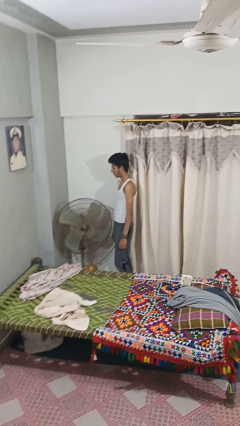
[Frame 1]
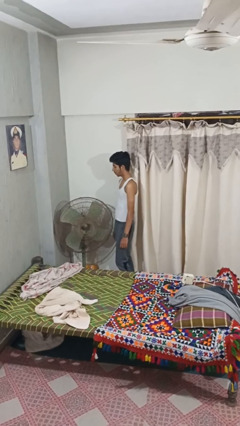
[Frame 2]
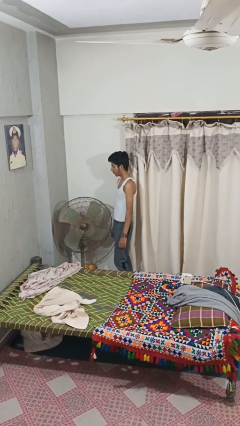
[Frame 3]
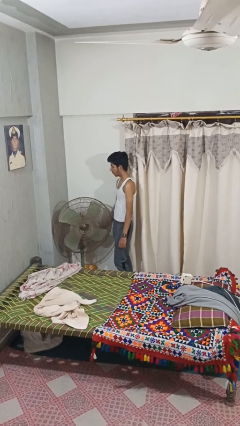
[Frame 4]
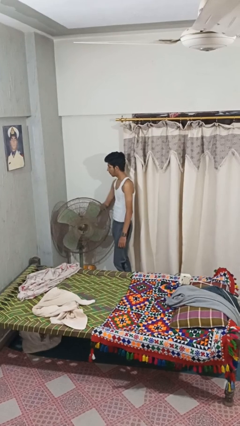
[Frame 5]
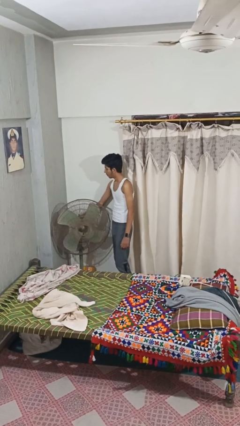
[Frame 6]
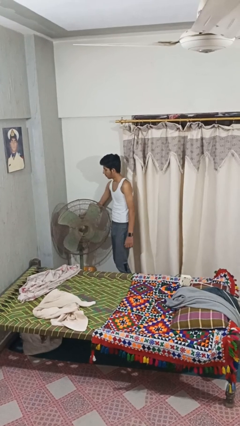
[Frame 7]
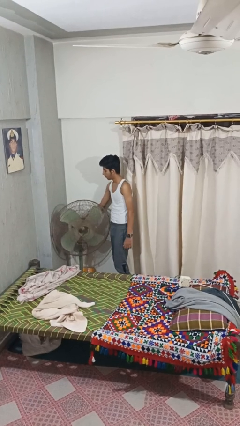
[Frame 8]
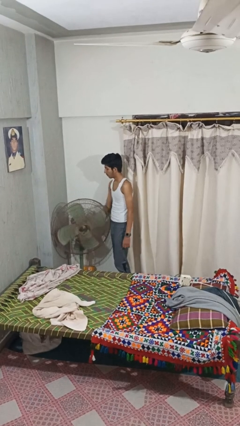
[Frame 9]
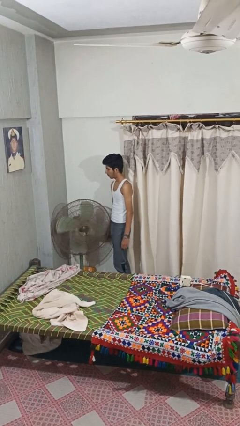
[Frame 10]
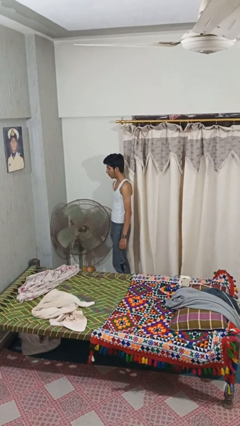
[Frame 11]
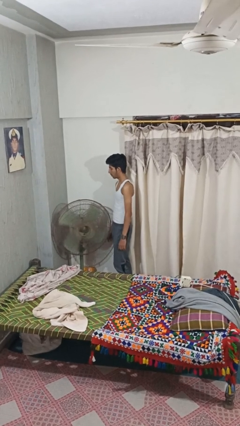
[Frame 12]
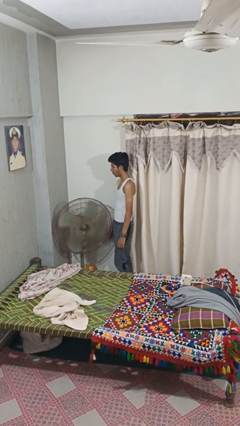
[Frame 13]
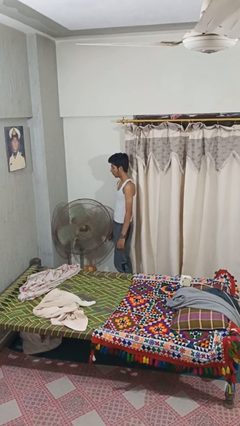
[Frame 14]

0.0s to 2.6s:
person turns on fan

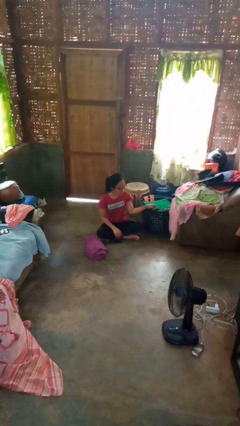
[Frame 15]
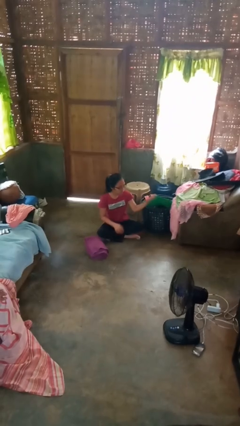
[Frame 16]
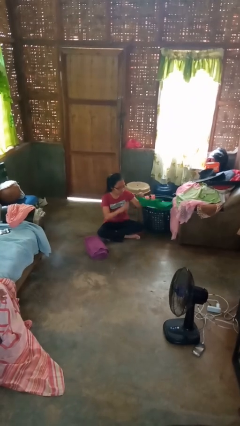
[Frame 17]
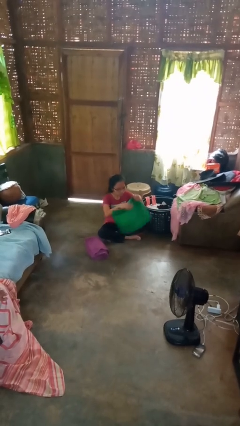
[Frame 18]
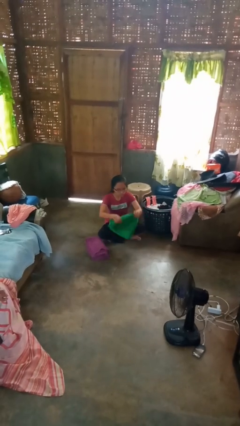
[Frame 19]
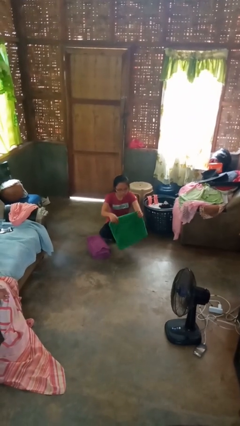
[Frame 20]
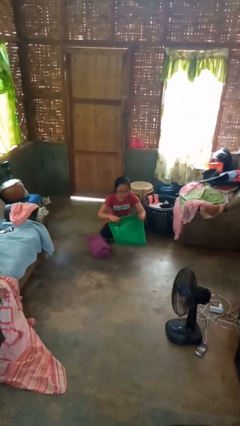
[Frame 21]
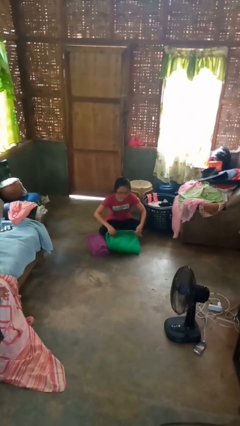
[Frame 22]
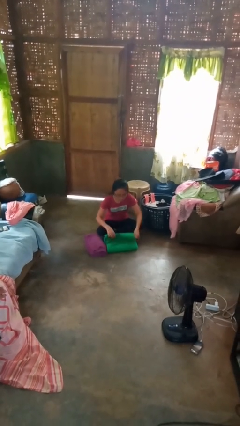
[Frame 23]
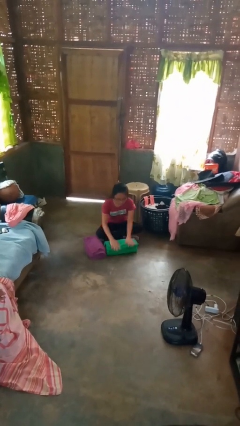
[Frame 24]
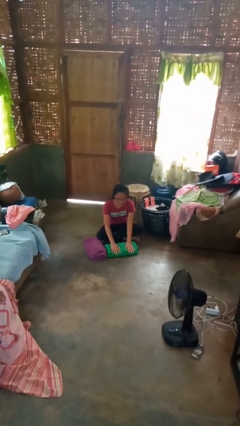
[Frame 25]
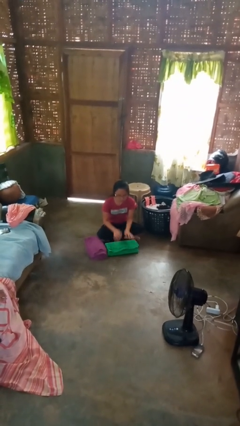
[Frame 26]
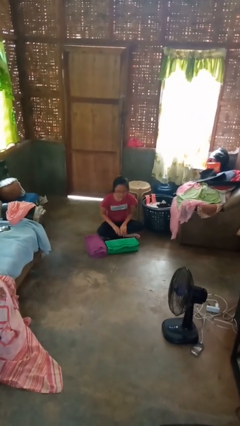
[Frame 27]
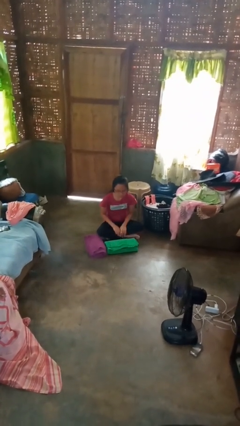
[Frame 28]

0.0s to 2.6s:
person folds towel

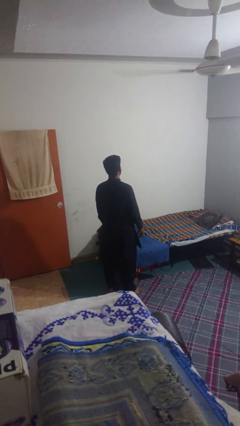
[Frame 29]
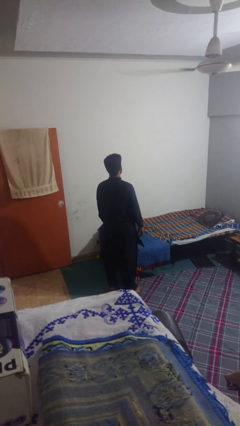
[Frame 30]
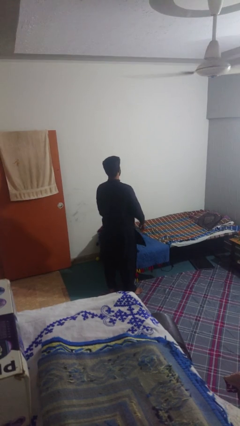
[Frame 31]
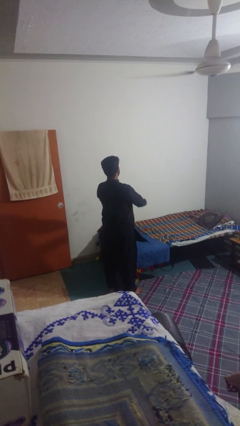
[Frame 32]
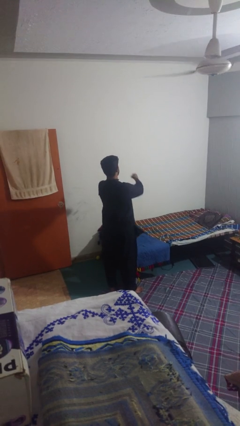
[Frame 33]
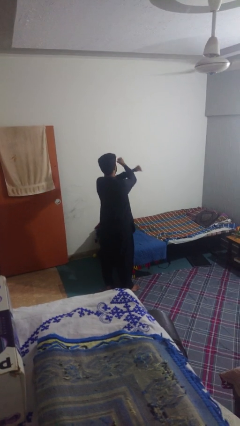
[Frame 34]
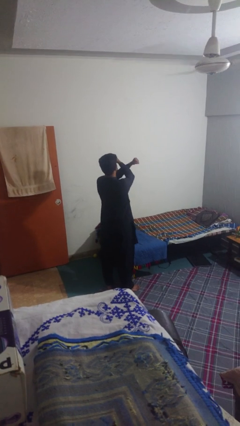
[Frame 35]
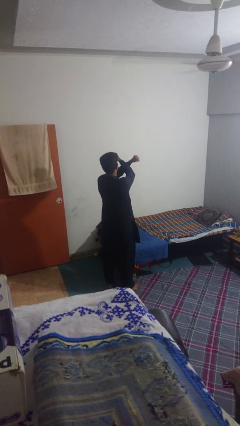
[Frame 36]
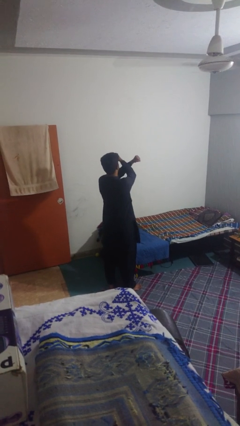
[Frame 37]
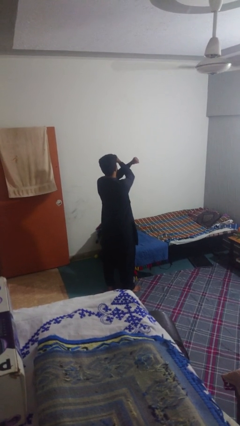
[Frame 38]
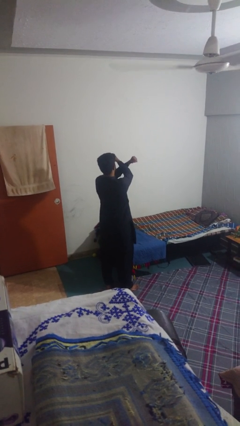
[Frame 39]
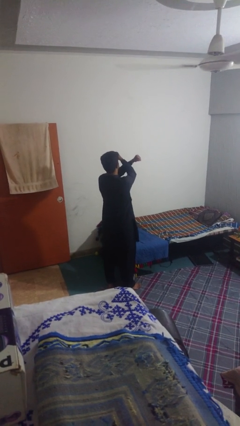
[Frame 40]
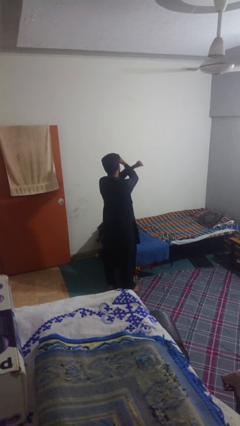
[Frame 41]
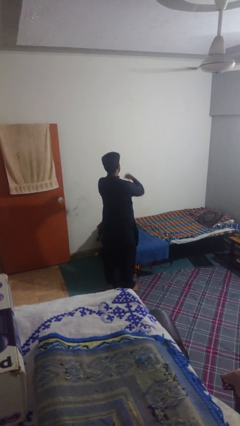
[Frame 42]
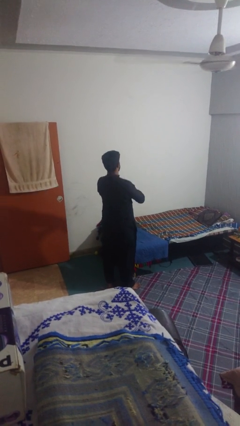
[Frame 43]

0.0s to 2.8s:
person gestures arms x

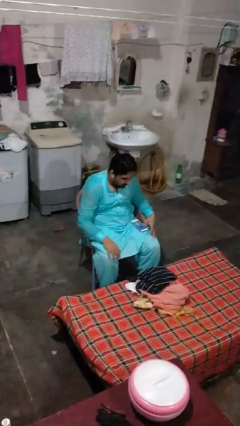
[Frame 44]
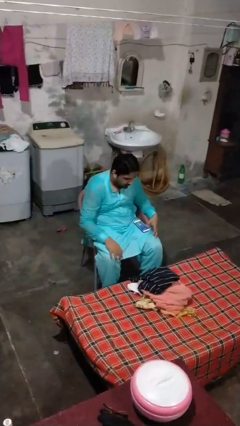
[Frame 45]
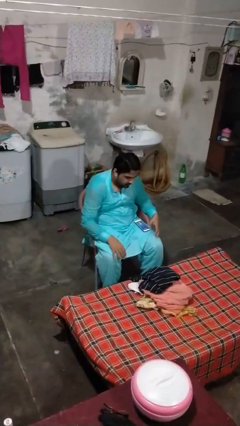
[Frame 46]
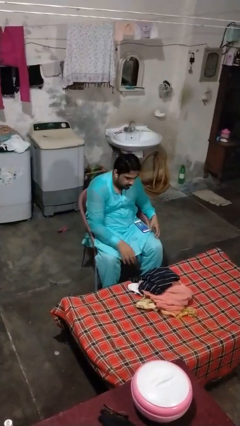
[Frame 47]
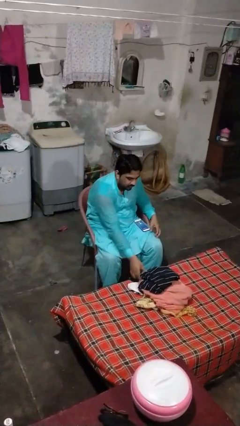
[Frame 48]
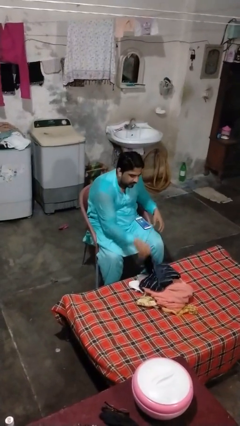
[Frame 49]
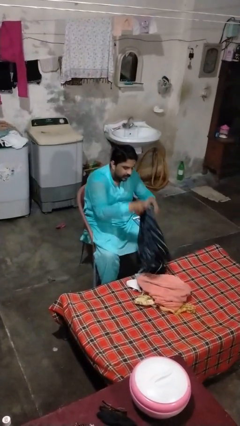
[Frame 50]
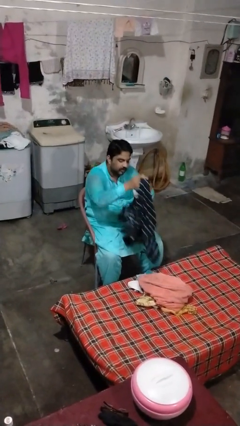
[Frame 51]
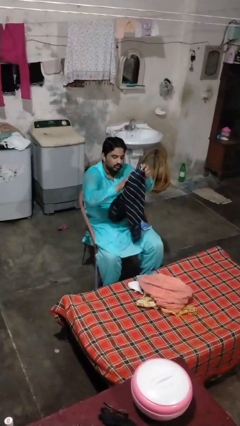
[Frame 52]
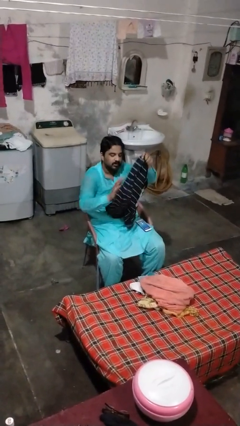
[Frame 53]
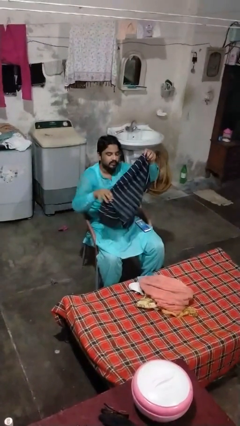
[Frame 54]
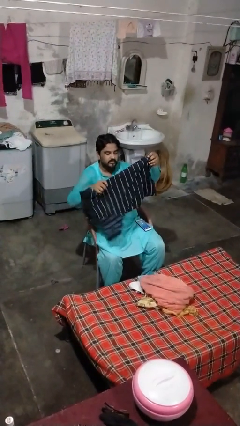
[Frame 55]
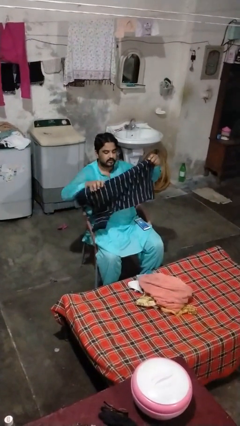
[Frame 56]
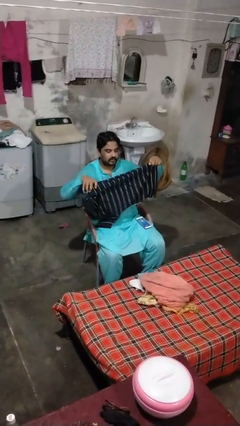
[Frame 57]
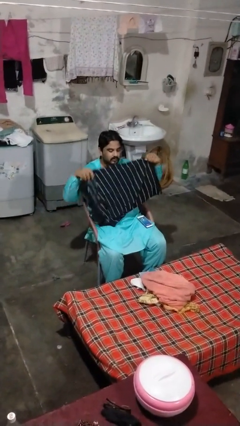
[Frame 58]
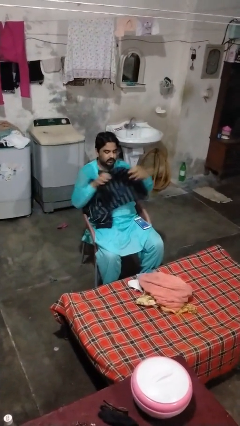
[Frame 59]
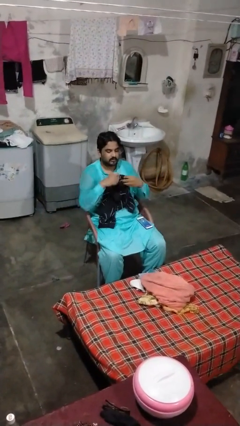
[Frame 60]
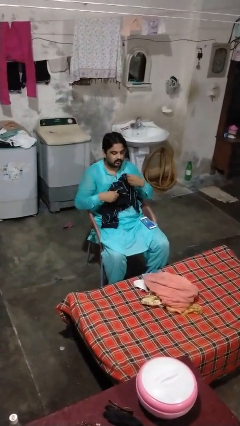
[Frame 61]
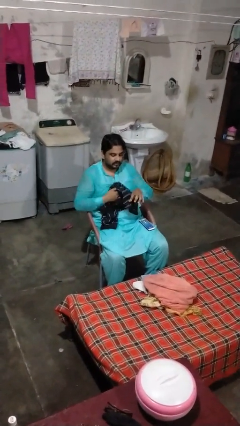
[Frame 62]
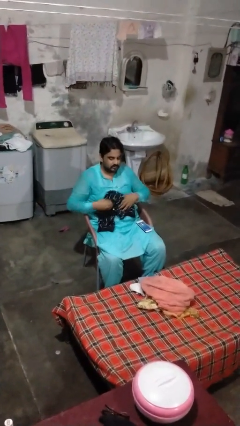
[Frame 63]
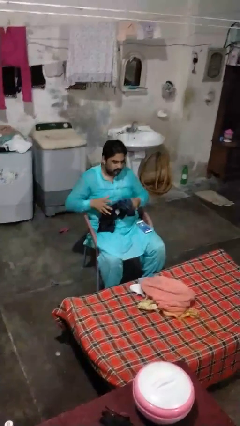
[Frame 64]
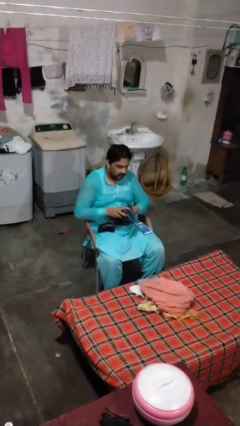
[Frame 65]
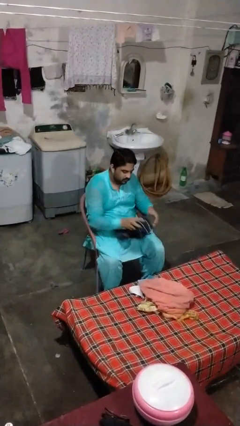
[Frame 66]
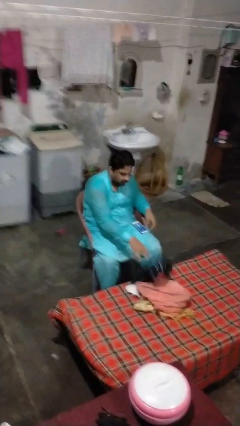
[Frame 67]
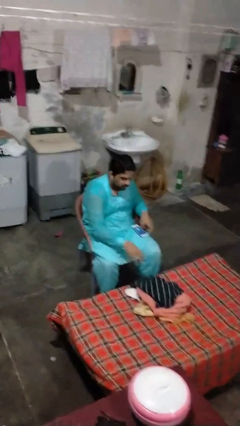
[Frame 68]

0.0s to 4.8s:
person folds shirt

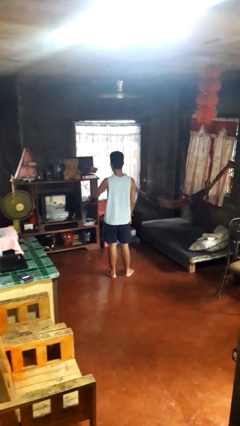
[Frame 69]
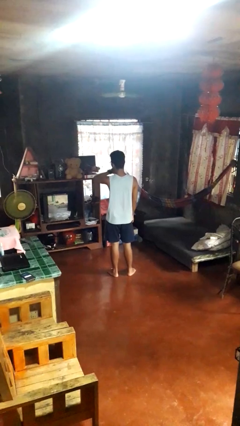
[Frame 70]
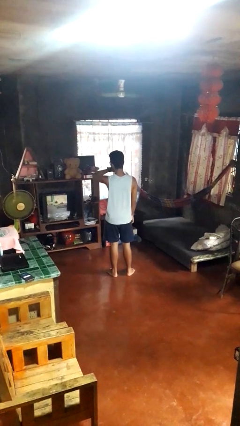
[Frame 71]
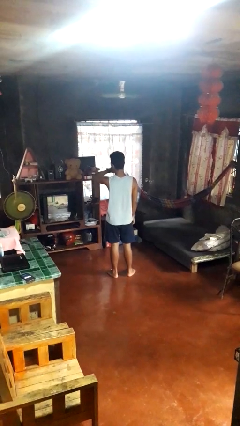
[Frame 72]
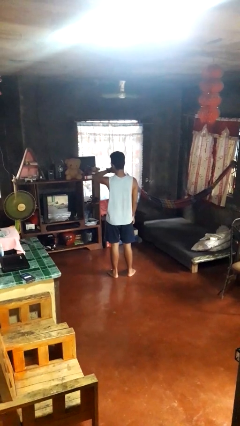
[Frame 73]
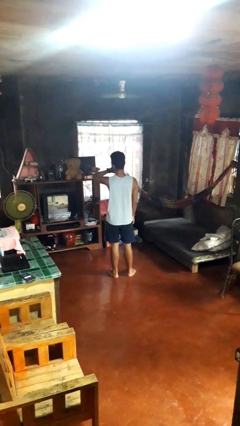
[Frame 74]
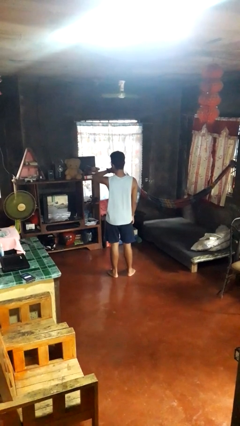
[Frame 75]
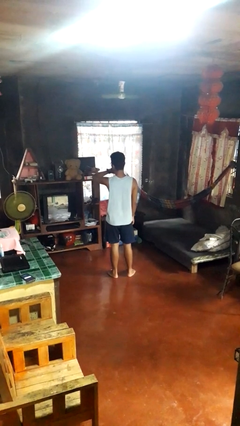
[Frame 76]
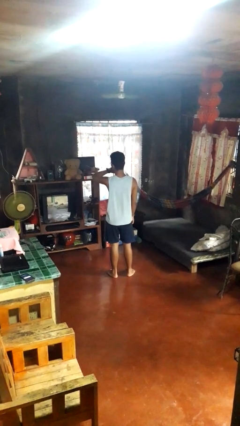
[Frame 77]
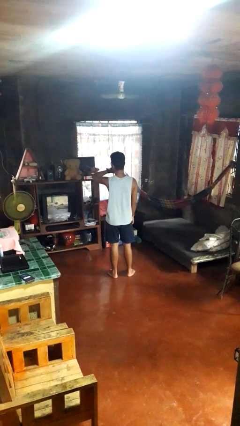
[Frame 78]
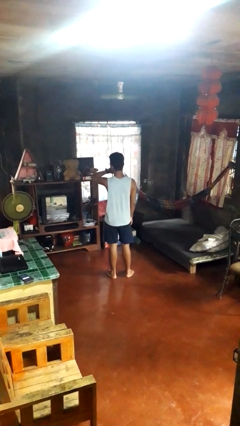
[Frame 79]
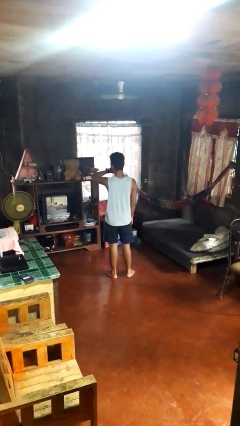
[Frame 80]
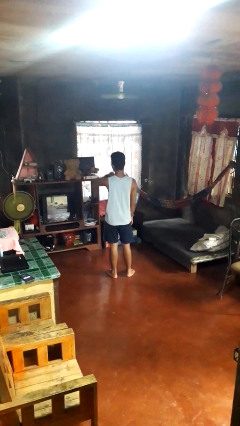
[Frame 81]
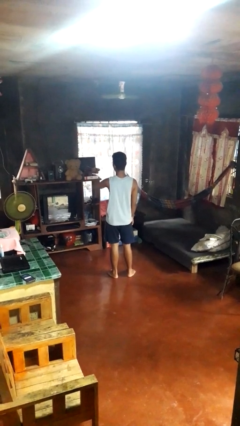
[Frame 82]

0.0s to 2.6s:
person looks at wristwatch

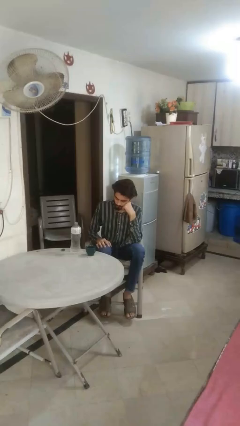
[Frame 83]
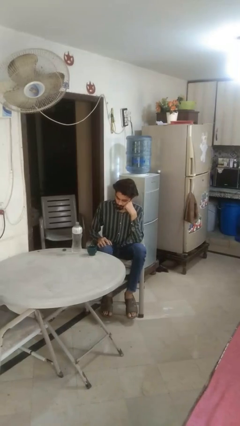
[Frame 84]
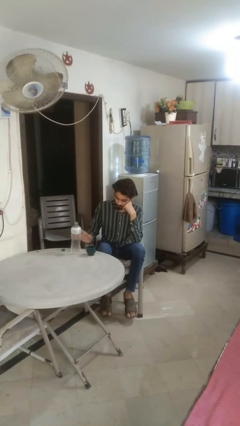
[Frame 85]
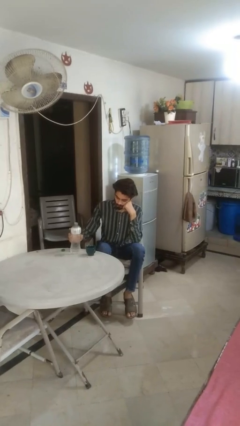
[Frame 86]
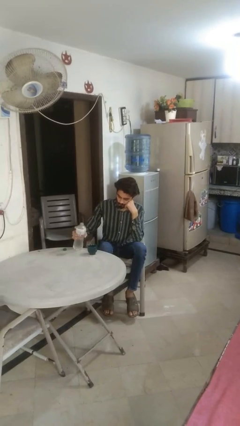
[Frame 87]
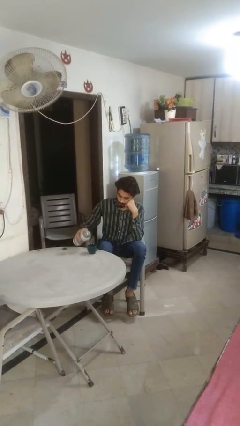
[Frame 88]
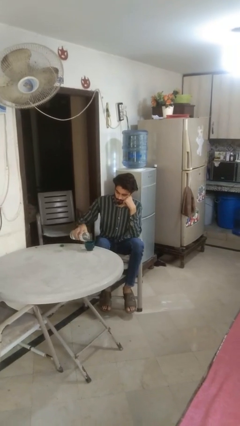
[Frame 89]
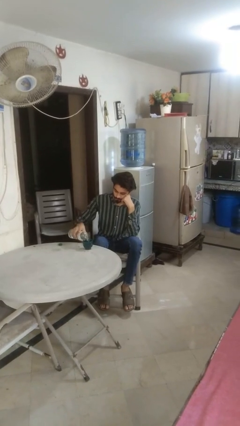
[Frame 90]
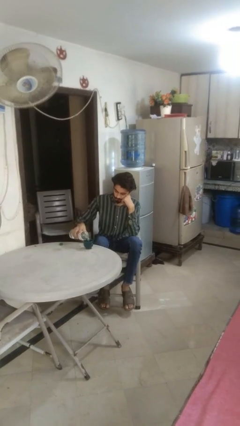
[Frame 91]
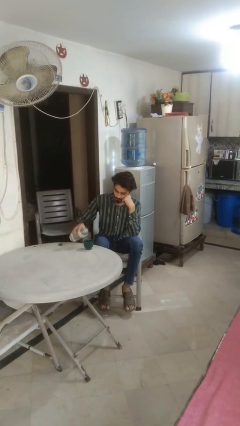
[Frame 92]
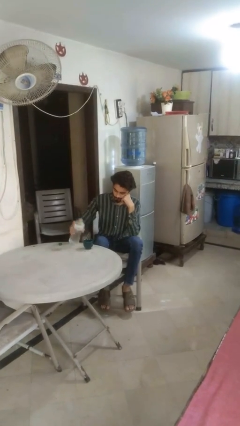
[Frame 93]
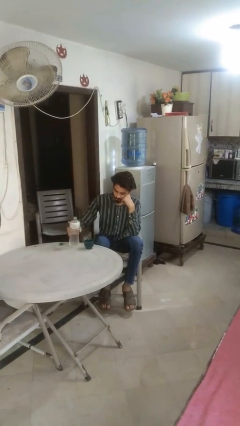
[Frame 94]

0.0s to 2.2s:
person pours liquid into cup
